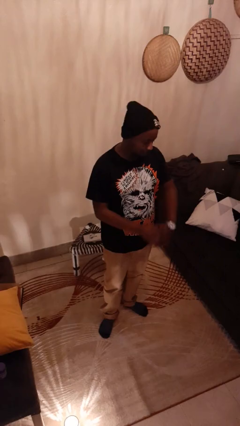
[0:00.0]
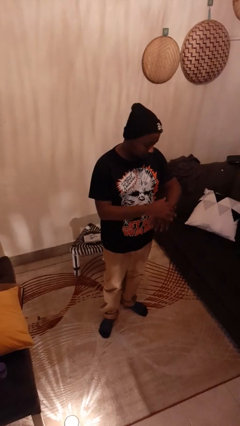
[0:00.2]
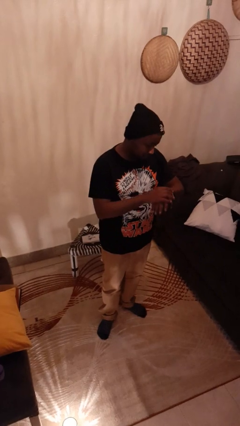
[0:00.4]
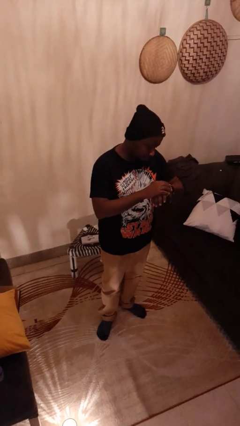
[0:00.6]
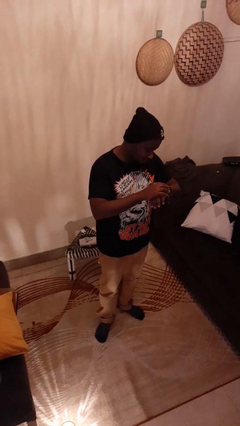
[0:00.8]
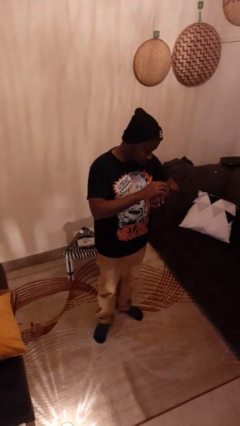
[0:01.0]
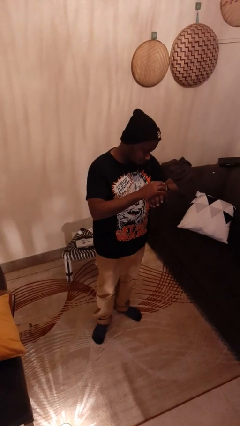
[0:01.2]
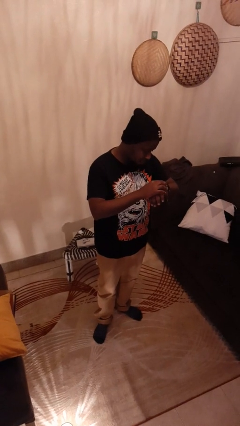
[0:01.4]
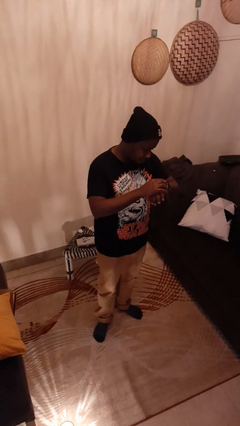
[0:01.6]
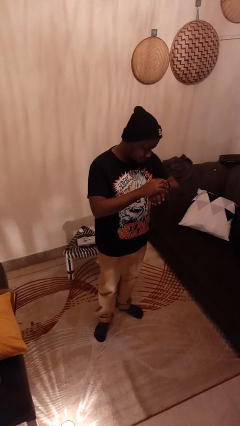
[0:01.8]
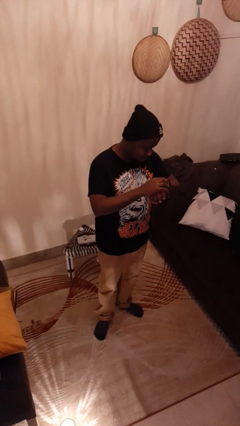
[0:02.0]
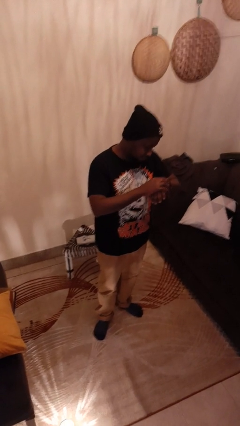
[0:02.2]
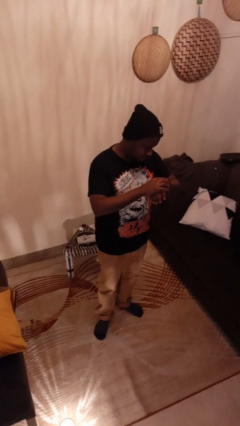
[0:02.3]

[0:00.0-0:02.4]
person looks at wristwatch

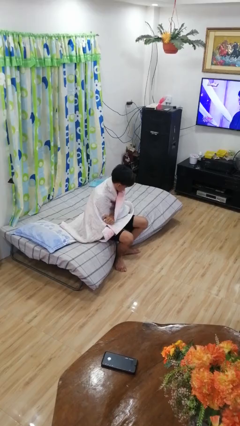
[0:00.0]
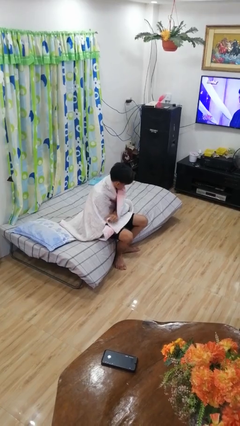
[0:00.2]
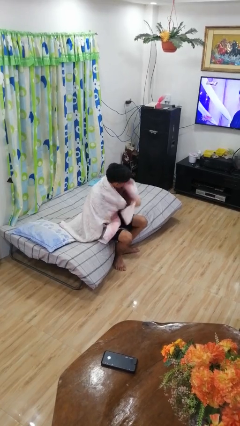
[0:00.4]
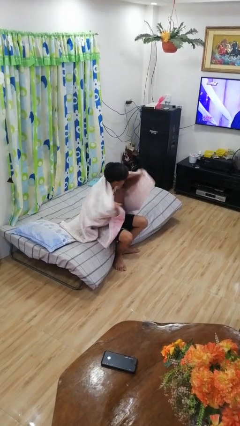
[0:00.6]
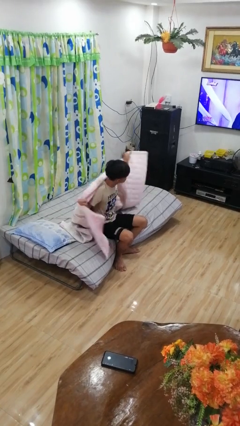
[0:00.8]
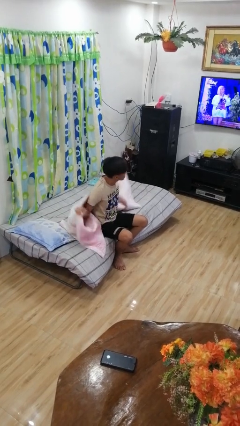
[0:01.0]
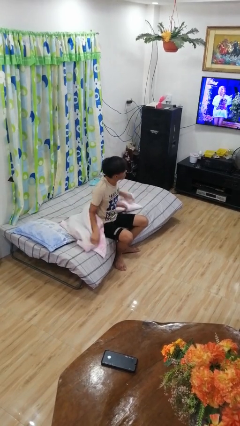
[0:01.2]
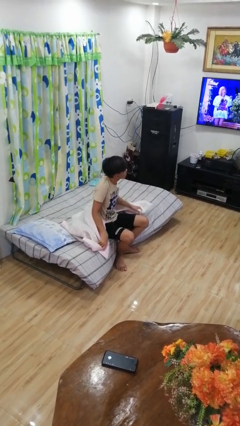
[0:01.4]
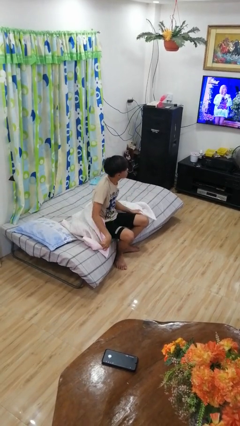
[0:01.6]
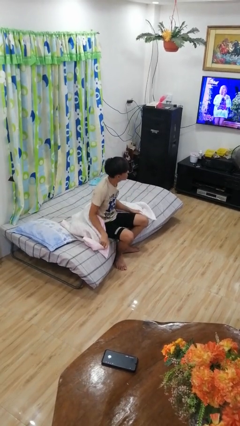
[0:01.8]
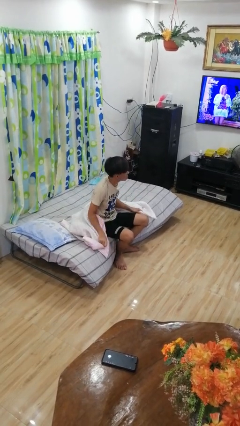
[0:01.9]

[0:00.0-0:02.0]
person uncovers with bedsheets

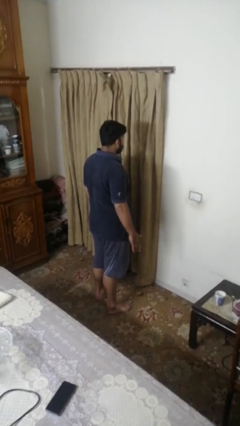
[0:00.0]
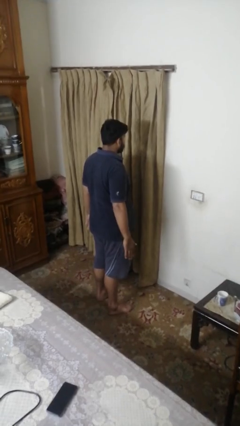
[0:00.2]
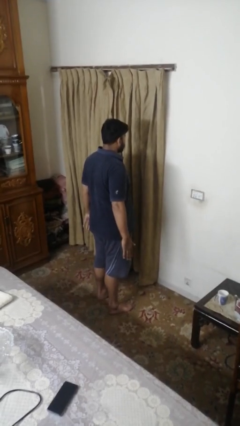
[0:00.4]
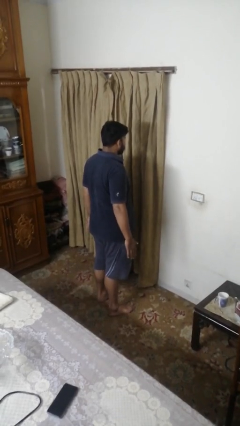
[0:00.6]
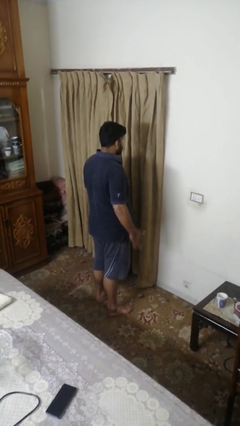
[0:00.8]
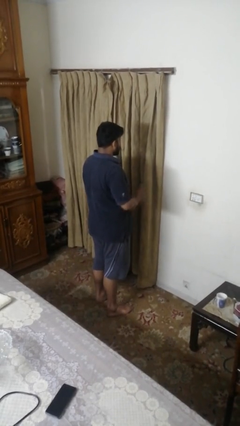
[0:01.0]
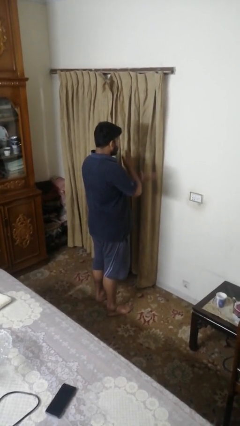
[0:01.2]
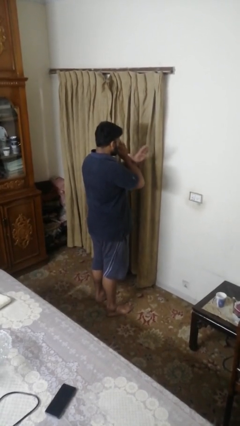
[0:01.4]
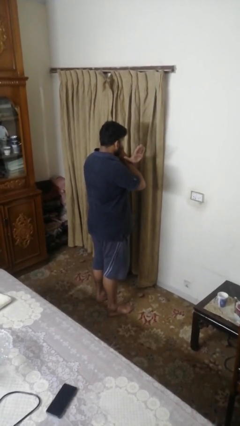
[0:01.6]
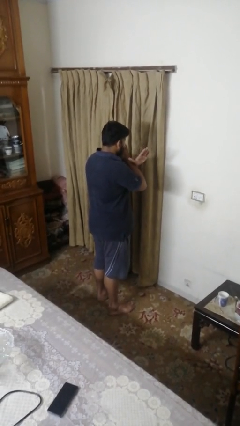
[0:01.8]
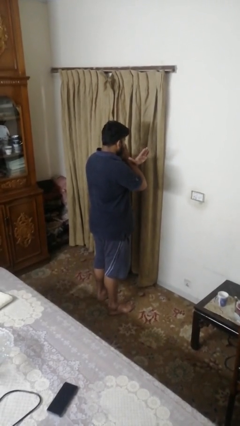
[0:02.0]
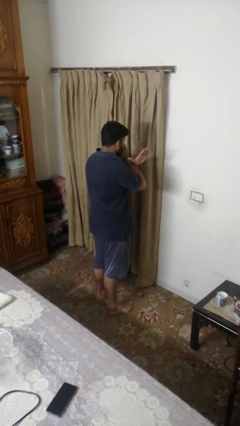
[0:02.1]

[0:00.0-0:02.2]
person gestures arms x

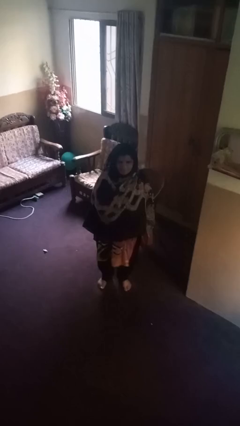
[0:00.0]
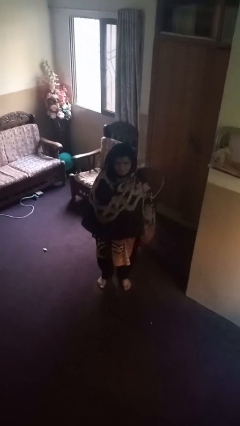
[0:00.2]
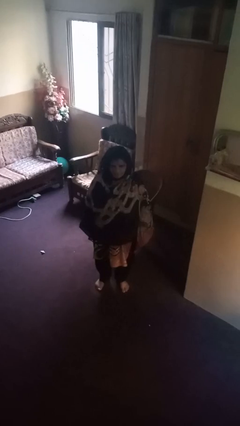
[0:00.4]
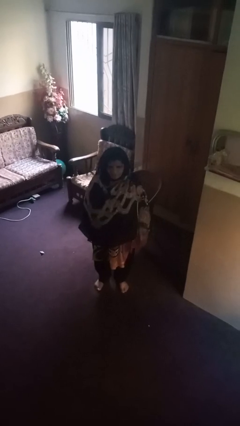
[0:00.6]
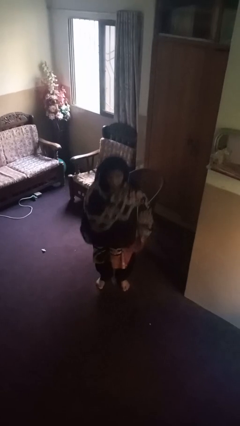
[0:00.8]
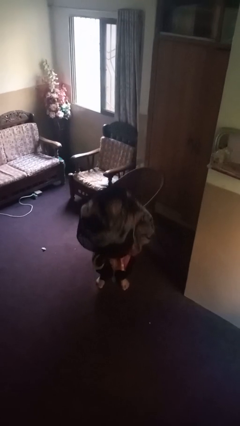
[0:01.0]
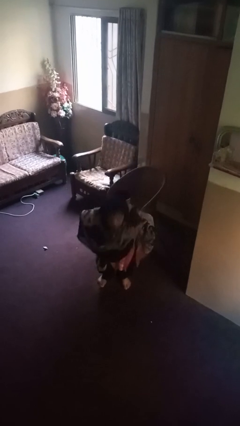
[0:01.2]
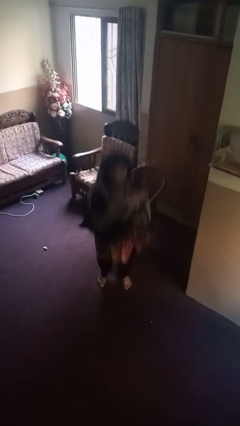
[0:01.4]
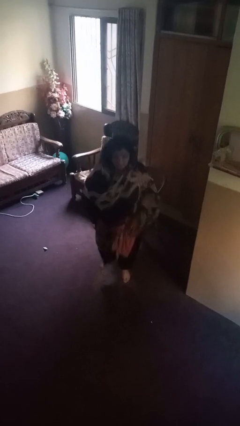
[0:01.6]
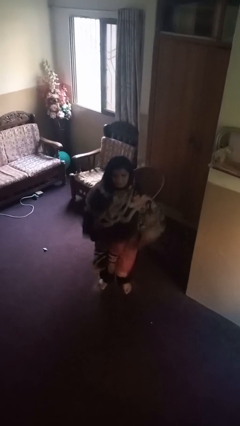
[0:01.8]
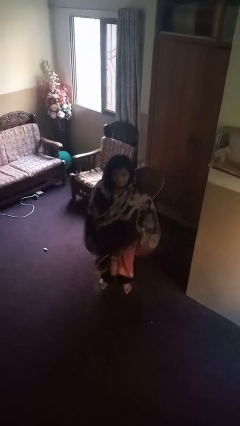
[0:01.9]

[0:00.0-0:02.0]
person jumps

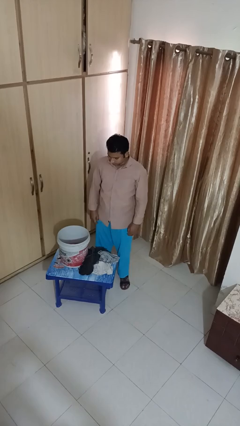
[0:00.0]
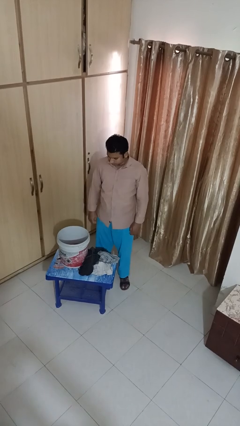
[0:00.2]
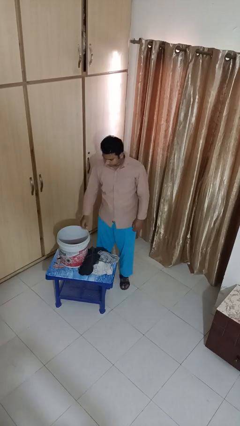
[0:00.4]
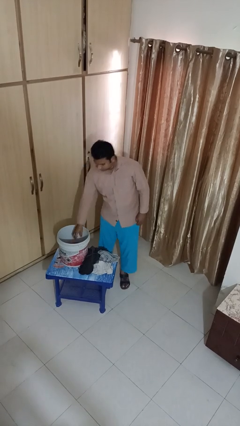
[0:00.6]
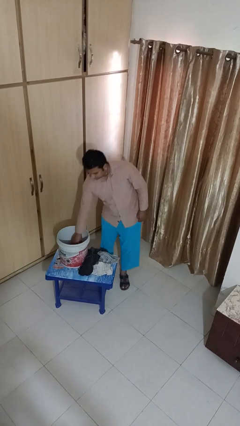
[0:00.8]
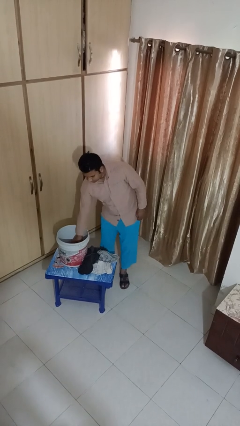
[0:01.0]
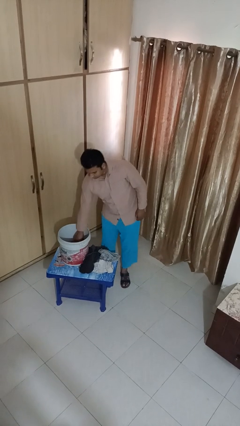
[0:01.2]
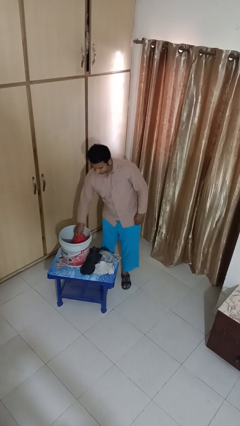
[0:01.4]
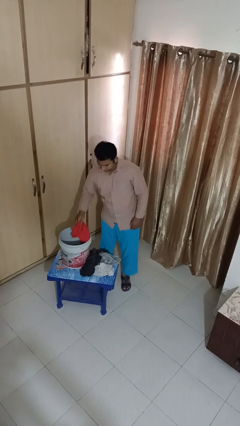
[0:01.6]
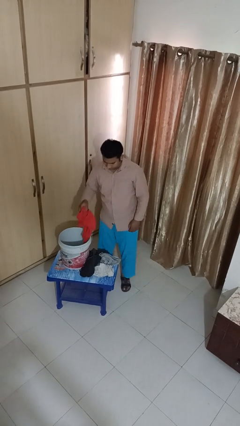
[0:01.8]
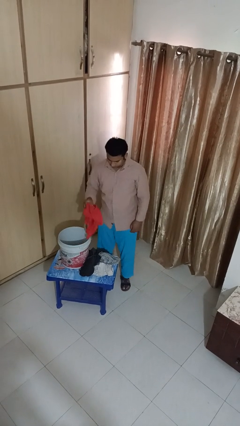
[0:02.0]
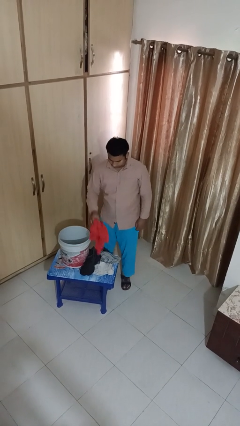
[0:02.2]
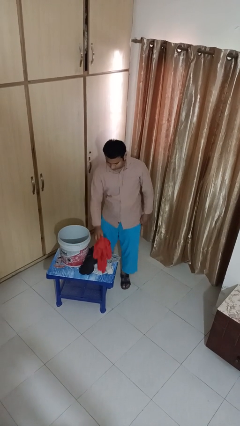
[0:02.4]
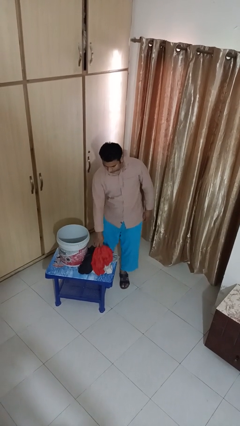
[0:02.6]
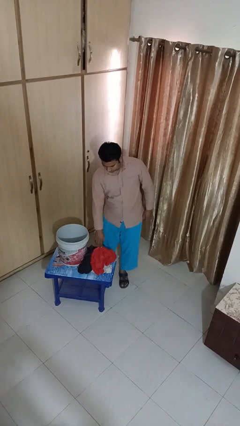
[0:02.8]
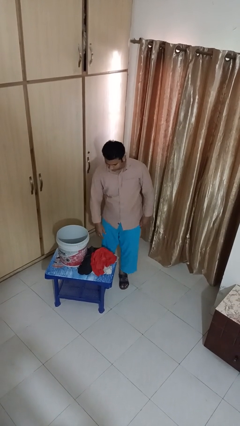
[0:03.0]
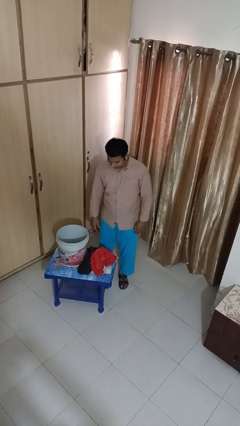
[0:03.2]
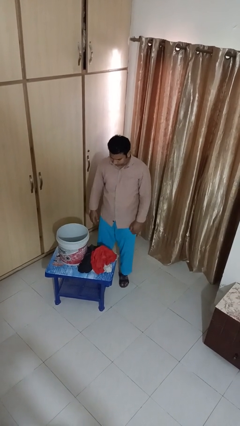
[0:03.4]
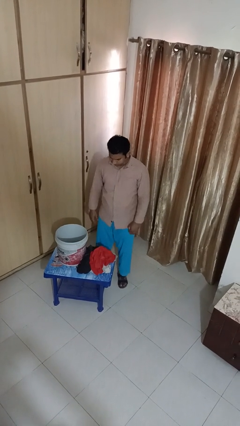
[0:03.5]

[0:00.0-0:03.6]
person takes object from basket

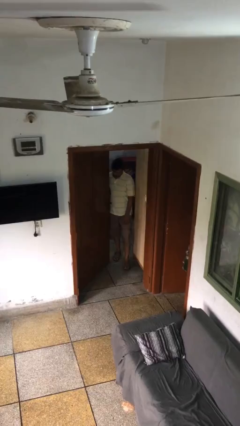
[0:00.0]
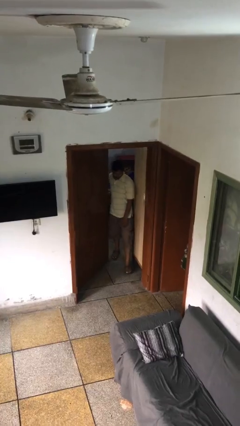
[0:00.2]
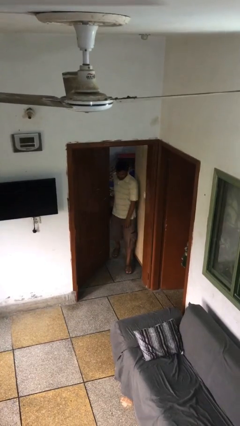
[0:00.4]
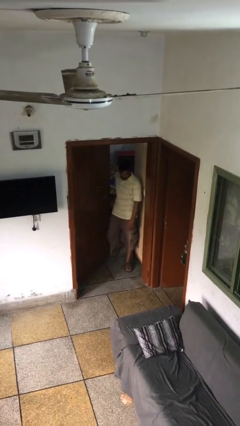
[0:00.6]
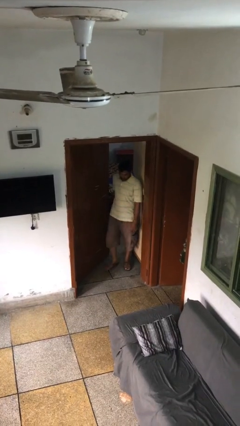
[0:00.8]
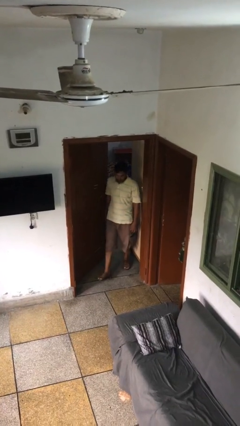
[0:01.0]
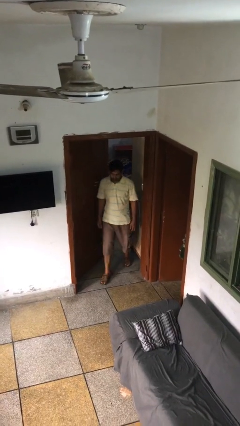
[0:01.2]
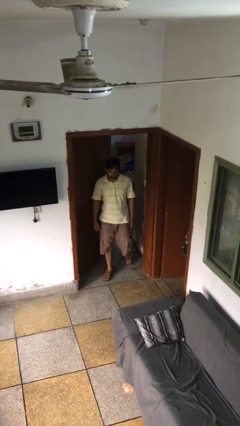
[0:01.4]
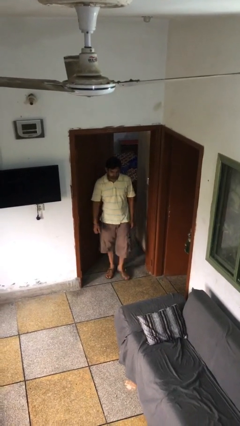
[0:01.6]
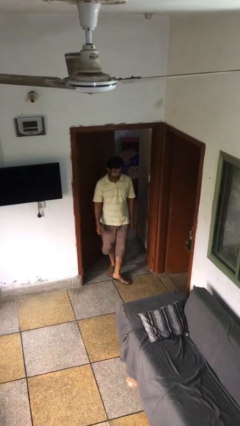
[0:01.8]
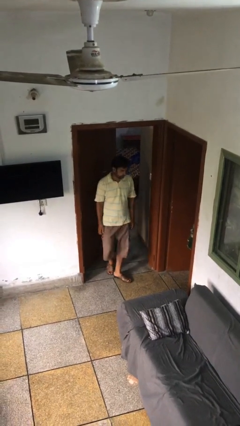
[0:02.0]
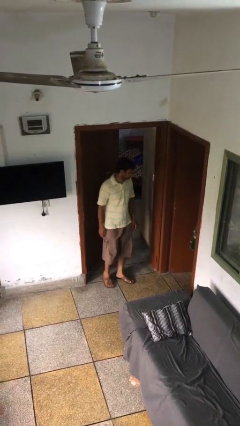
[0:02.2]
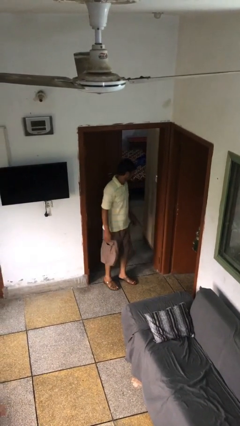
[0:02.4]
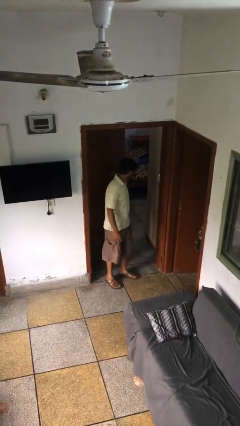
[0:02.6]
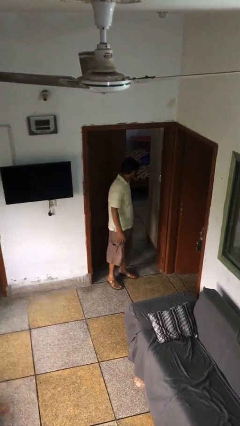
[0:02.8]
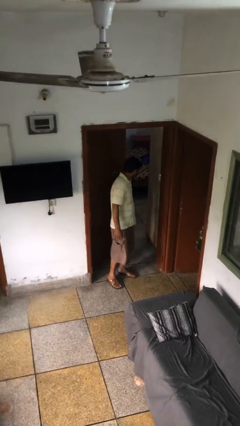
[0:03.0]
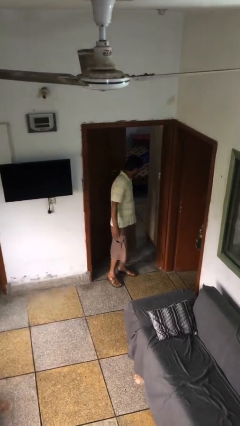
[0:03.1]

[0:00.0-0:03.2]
person enters scene through structure

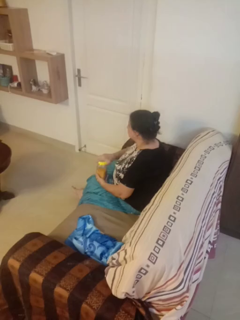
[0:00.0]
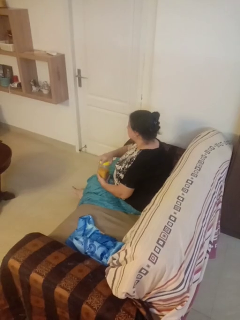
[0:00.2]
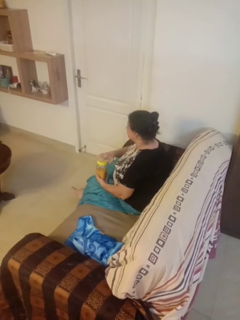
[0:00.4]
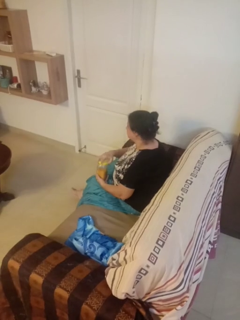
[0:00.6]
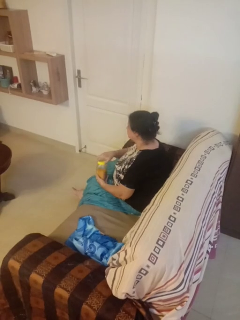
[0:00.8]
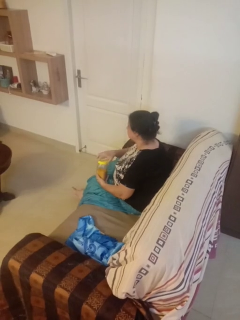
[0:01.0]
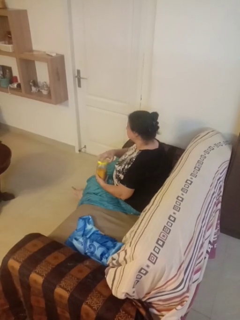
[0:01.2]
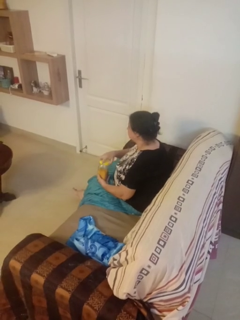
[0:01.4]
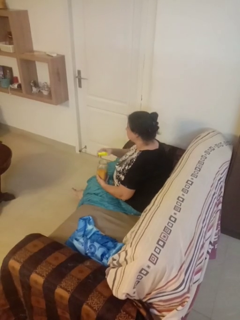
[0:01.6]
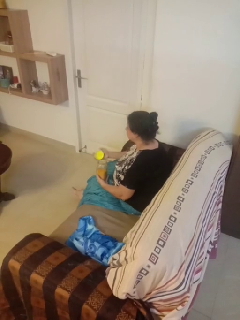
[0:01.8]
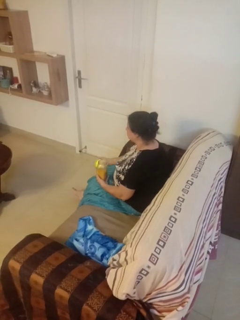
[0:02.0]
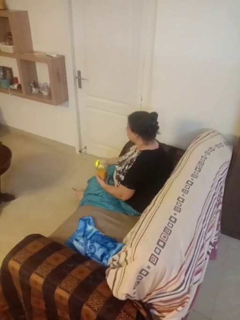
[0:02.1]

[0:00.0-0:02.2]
person opens jar
